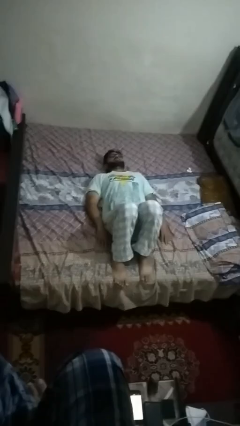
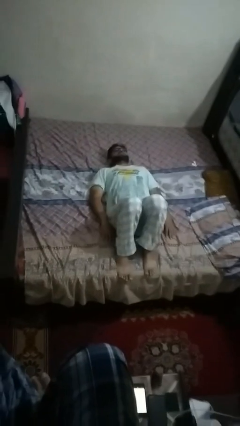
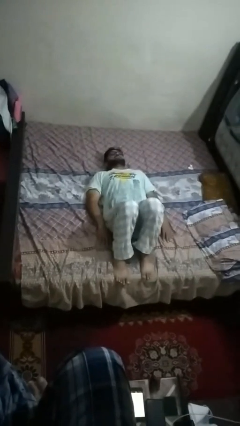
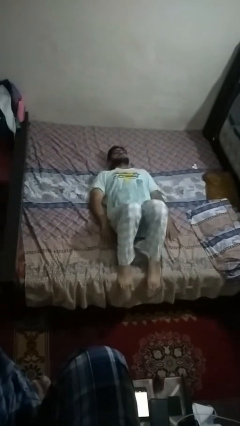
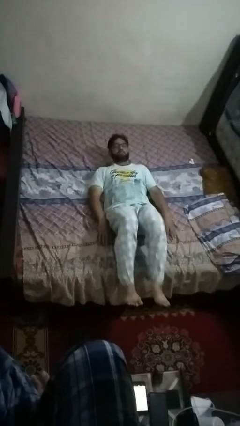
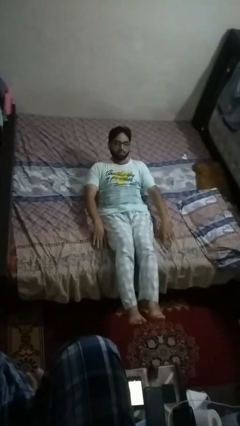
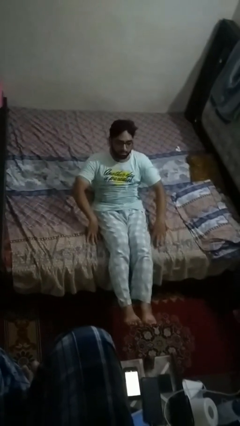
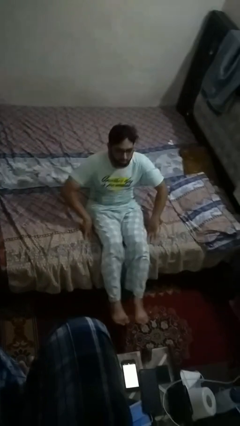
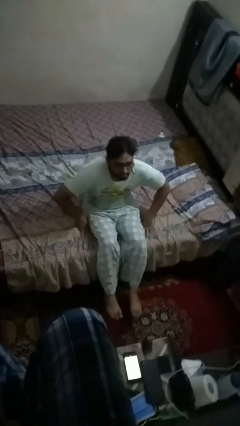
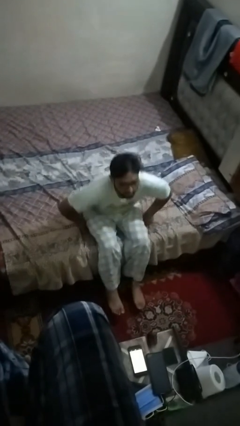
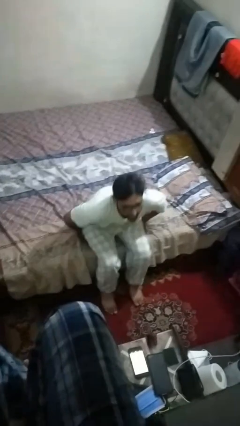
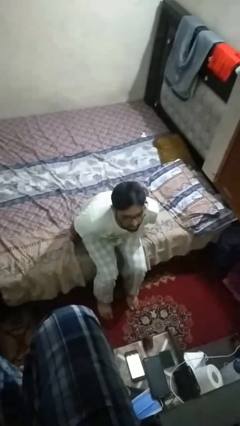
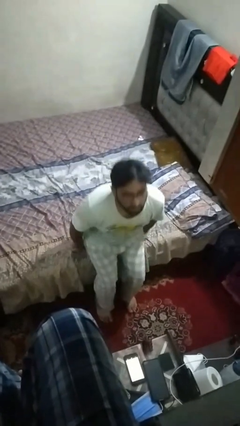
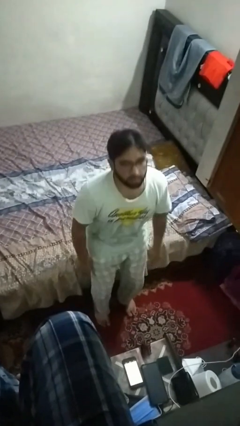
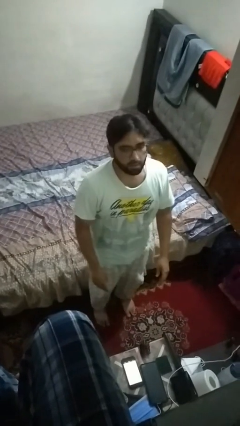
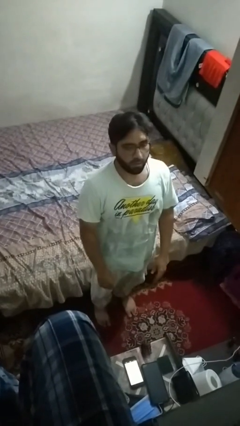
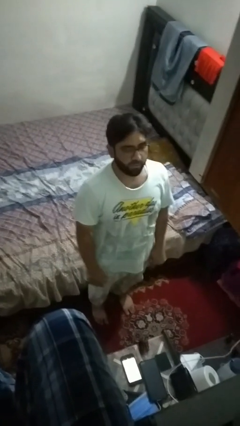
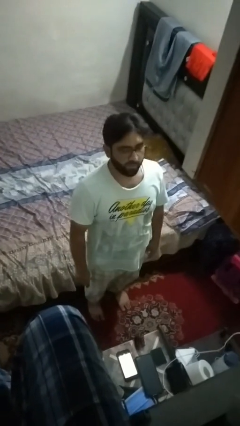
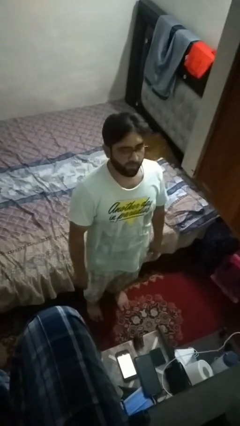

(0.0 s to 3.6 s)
person stands up

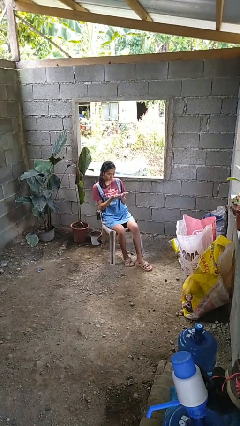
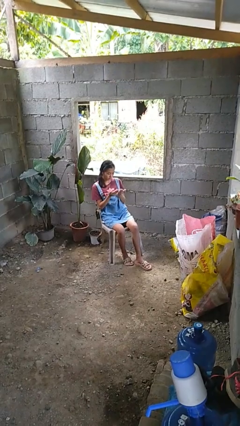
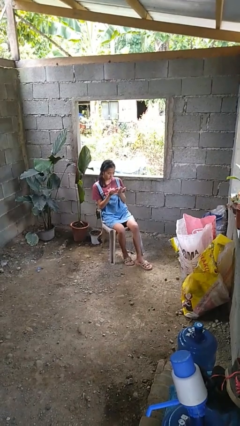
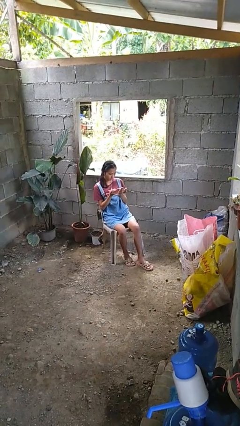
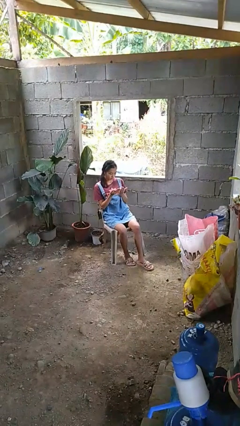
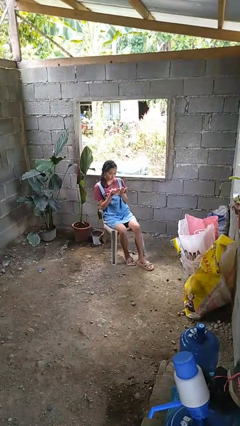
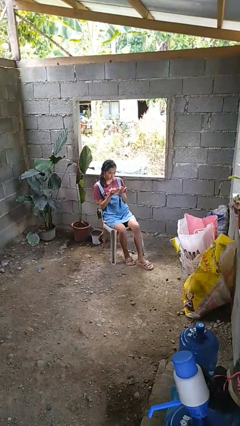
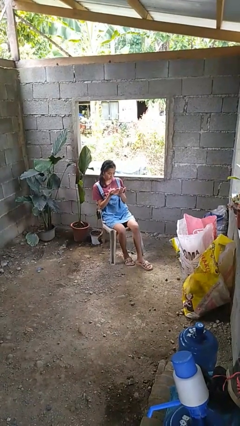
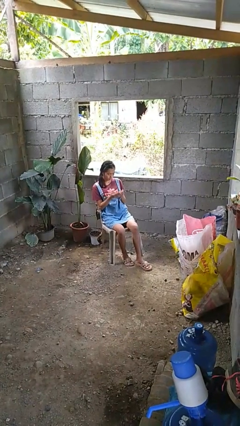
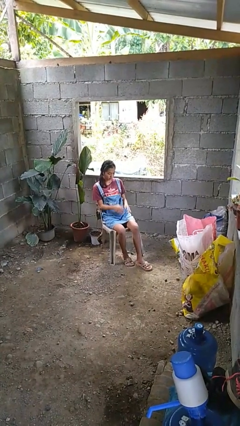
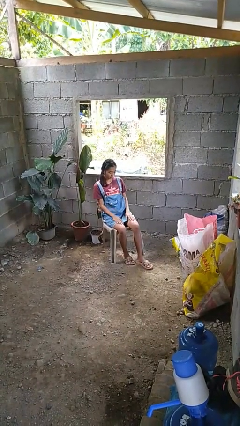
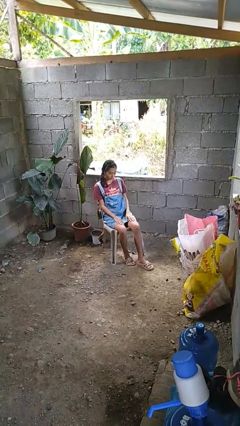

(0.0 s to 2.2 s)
person looks at hands in lap

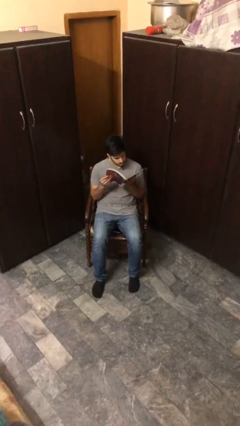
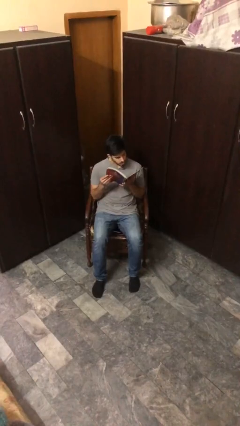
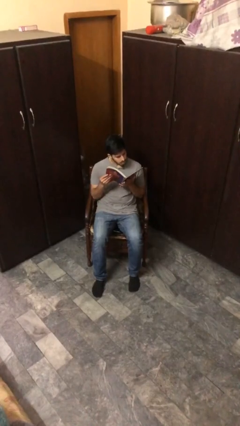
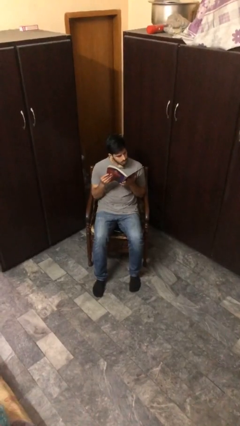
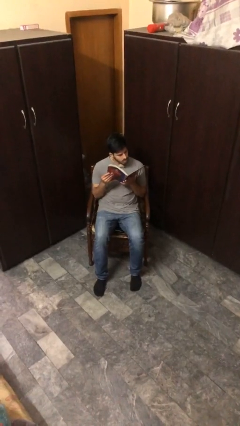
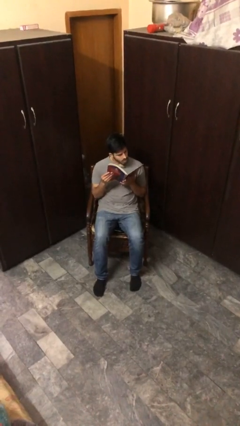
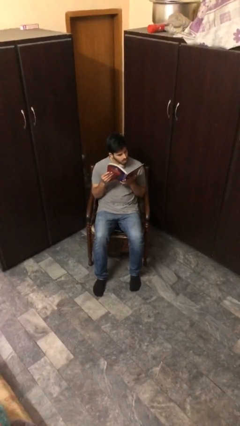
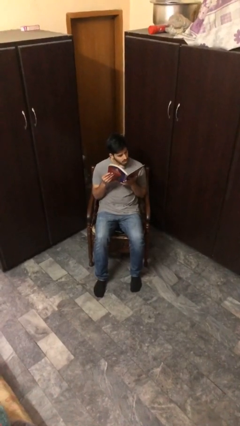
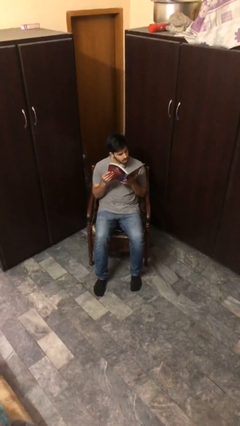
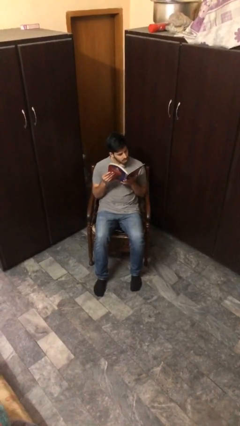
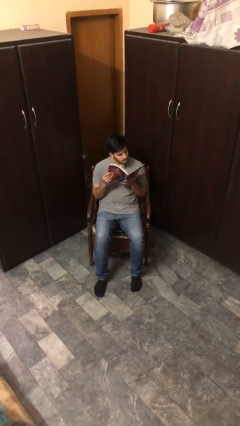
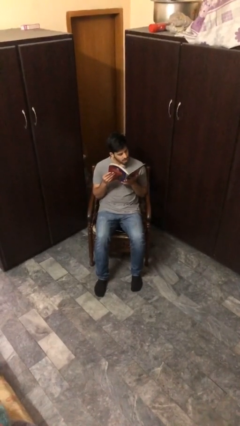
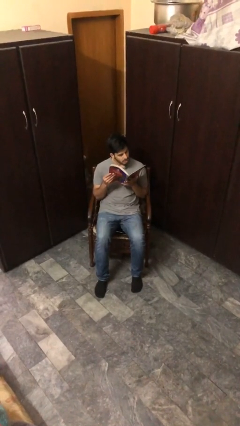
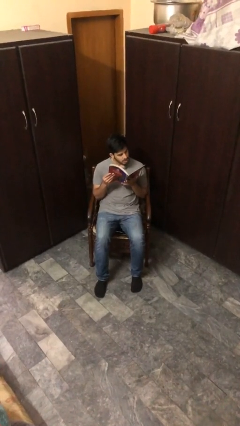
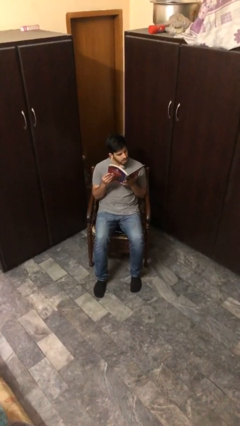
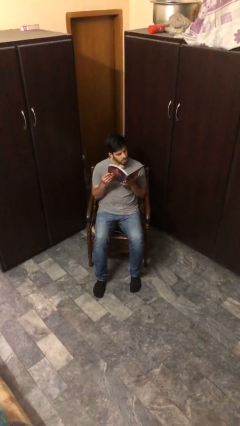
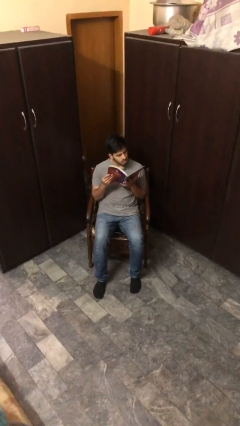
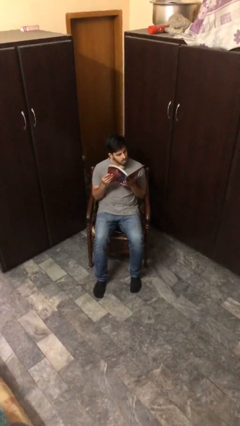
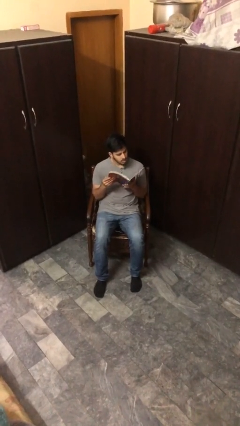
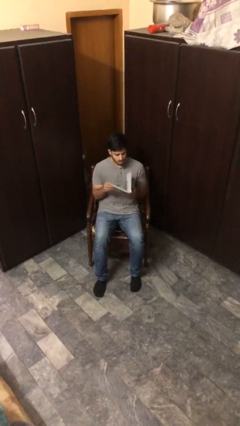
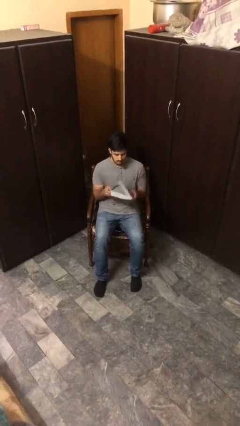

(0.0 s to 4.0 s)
person reads document

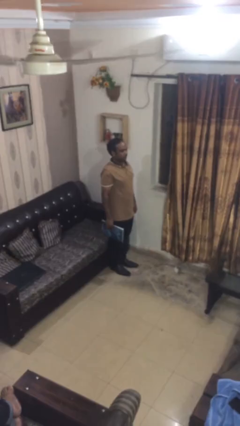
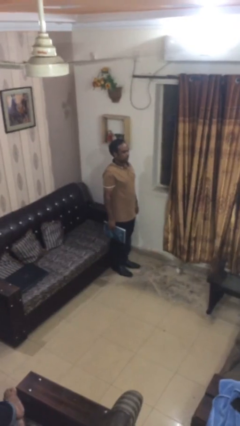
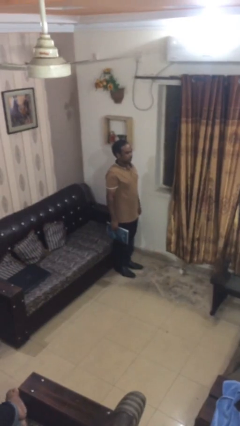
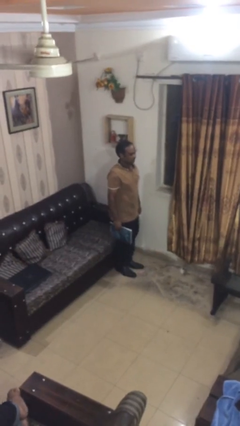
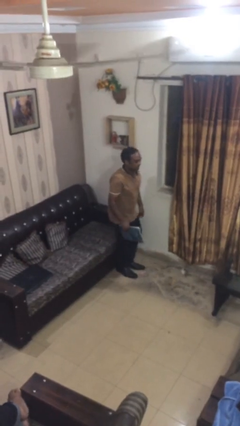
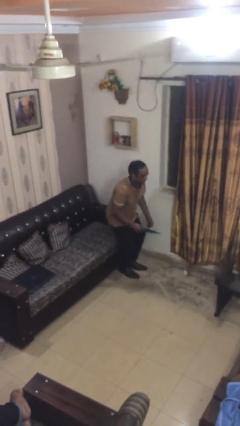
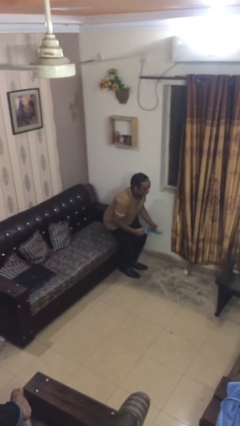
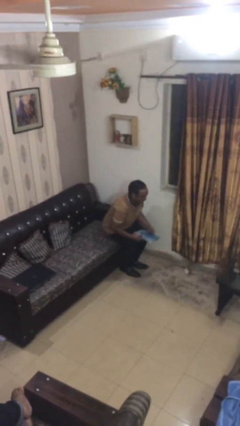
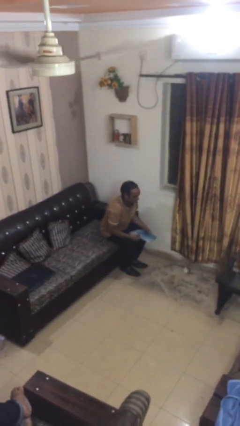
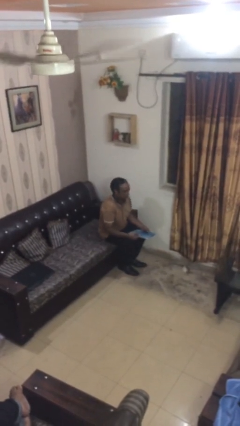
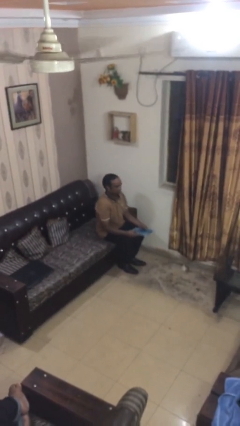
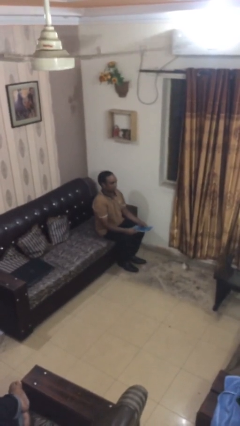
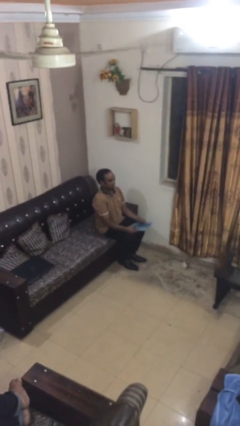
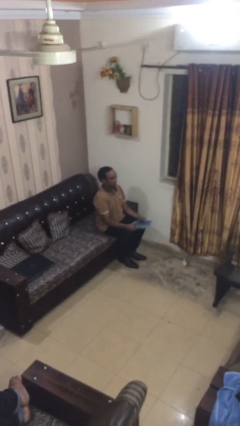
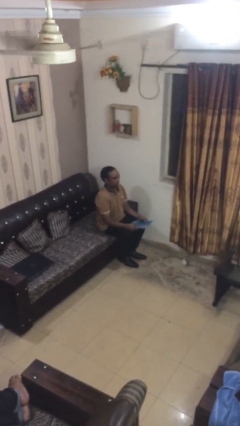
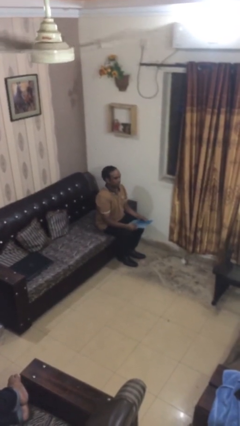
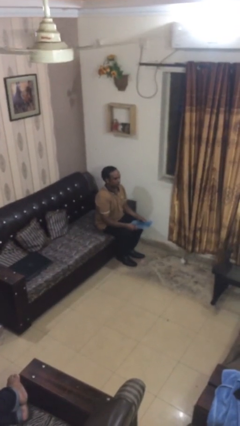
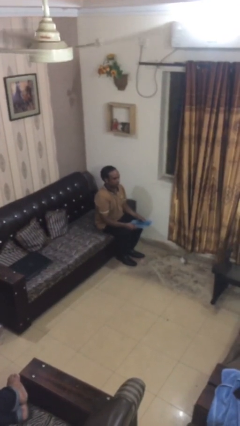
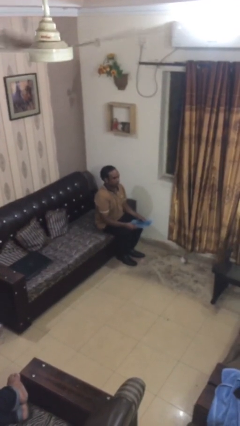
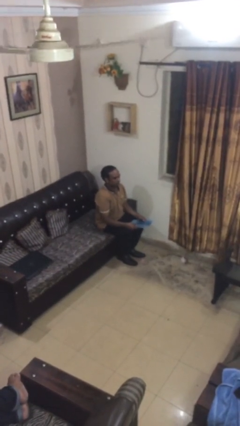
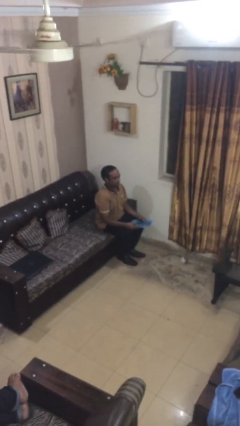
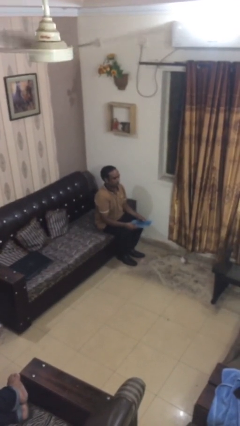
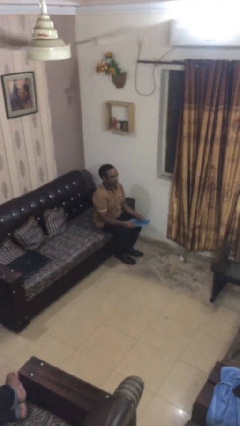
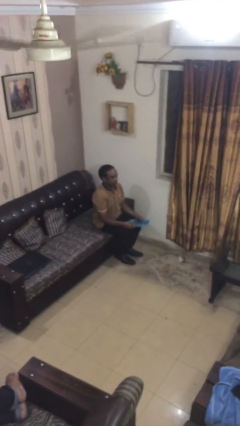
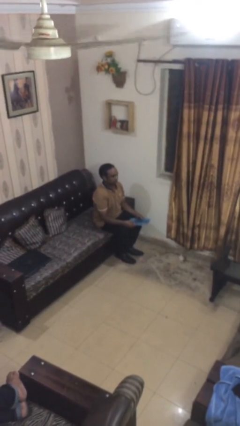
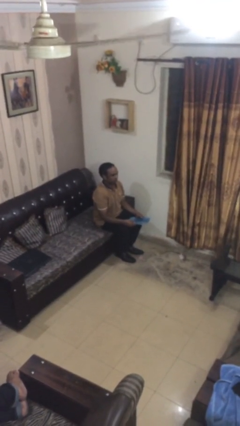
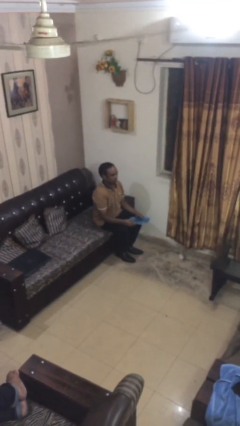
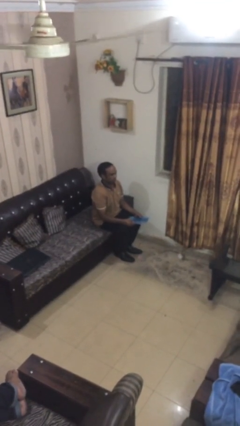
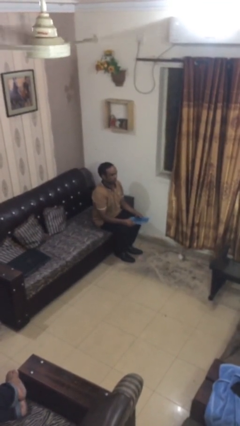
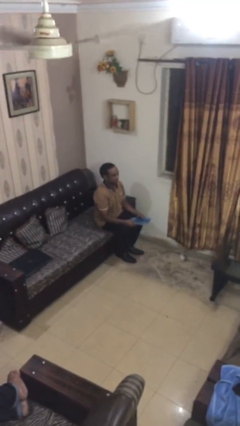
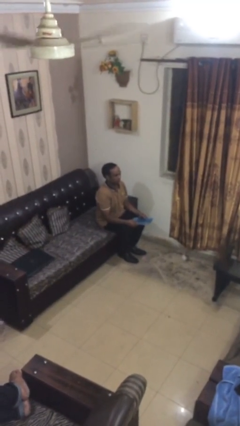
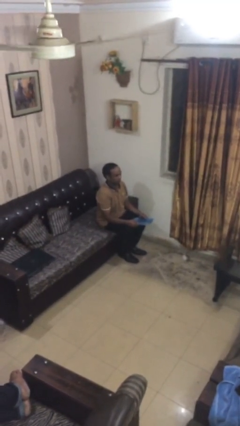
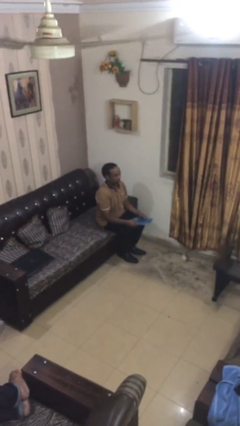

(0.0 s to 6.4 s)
person sits down

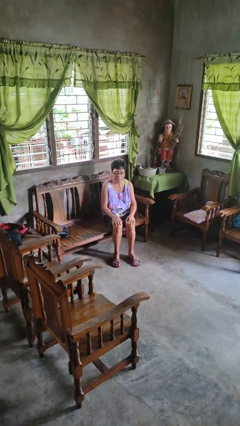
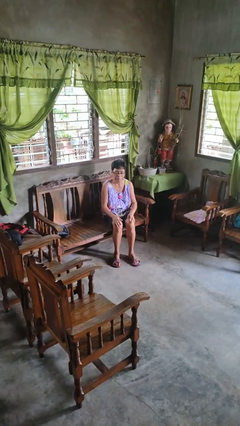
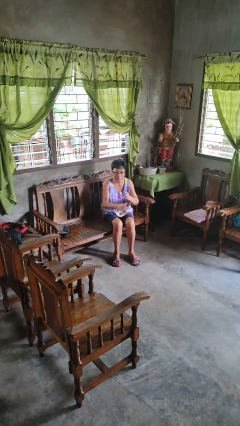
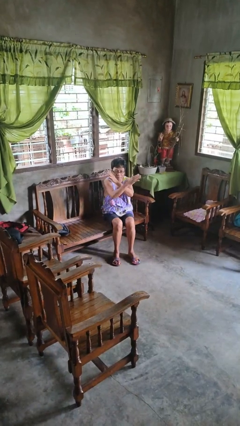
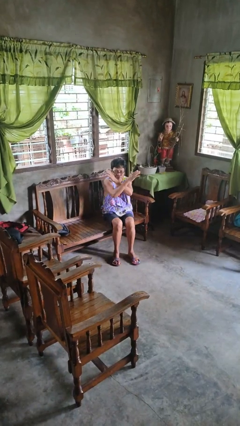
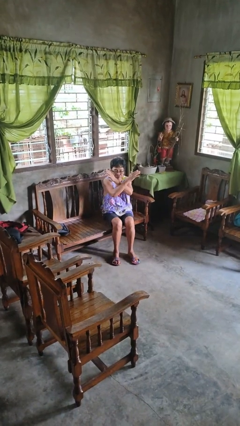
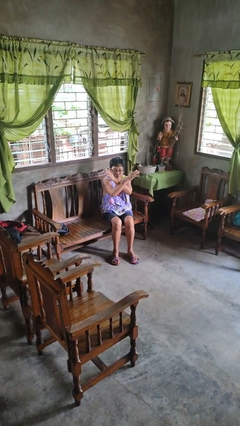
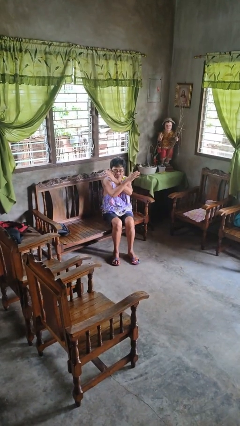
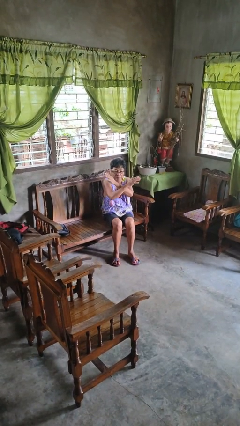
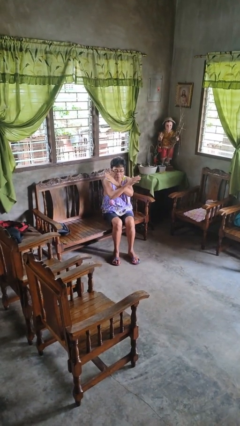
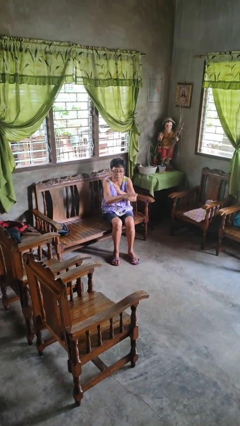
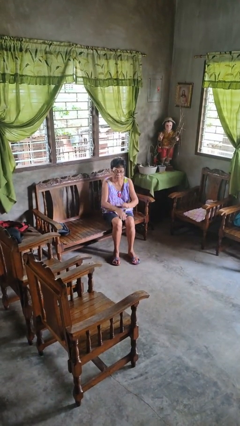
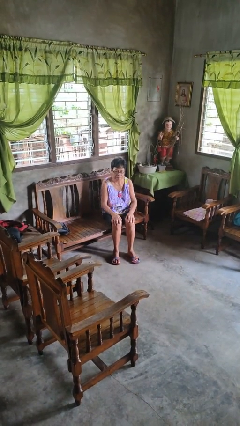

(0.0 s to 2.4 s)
person gestures arms x
